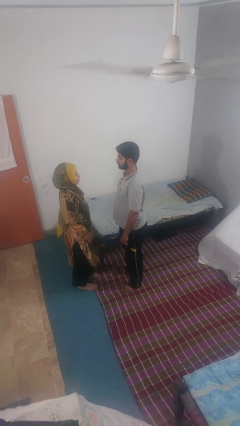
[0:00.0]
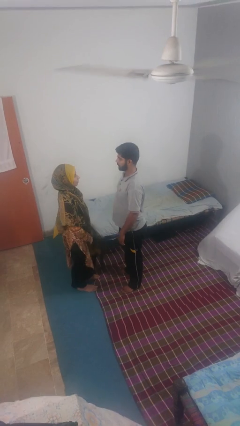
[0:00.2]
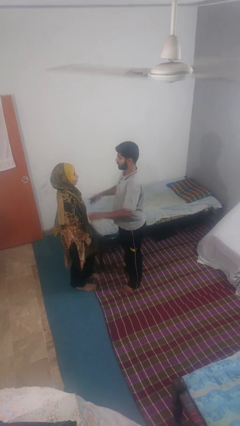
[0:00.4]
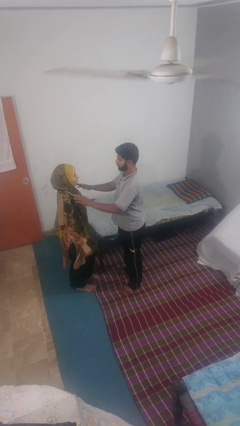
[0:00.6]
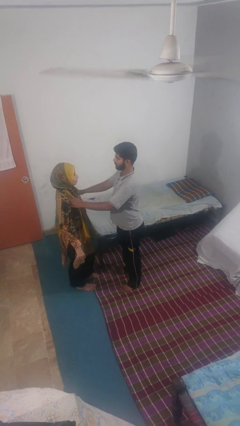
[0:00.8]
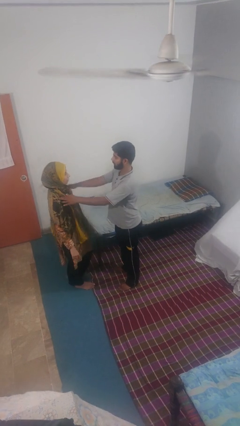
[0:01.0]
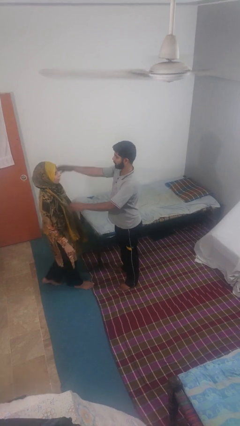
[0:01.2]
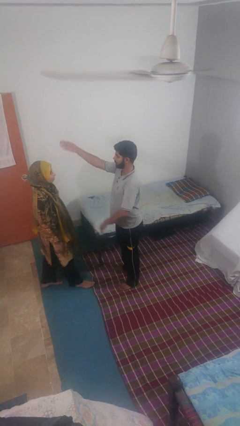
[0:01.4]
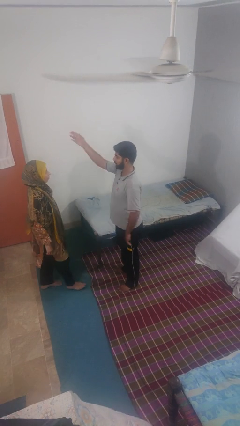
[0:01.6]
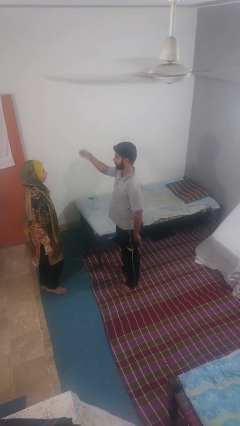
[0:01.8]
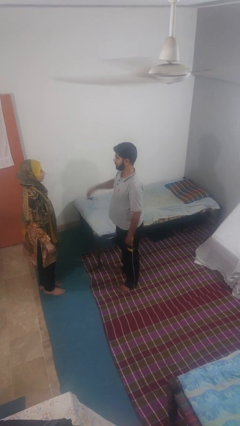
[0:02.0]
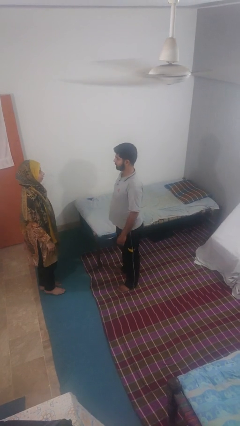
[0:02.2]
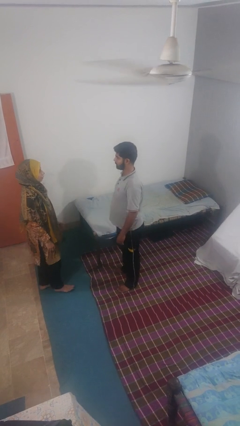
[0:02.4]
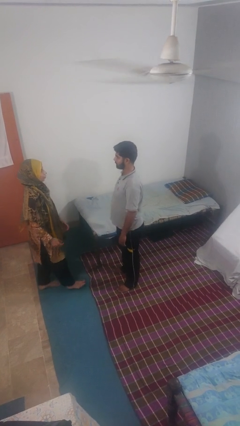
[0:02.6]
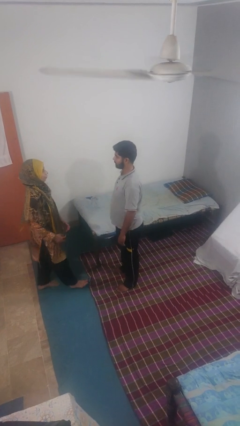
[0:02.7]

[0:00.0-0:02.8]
person shoves person

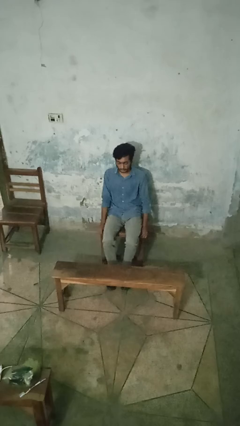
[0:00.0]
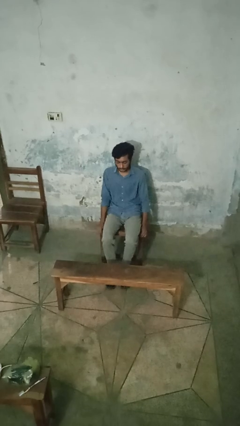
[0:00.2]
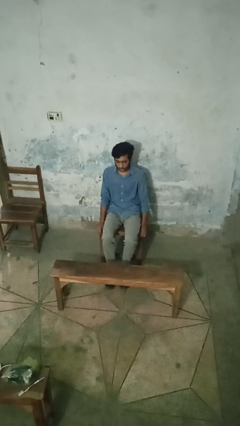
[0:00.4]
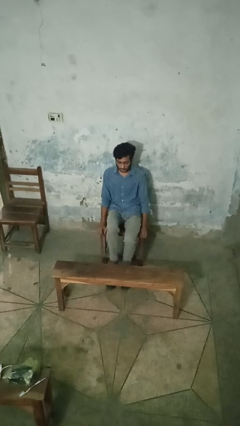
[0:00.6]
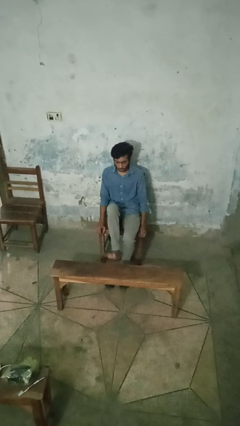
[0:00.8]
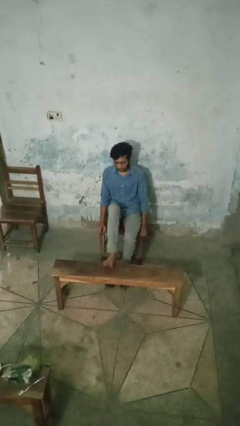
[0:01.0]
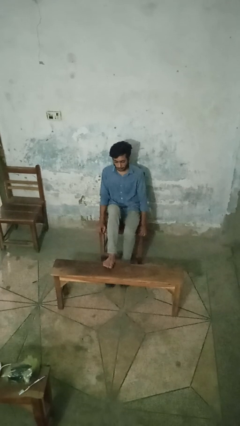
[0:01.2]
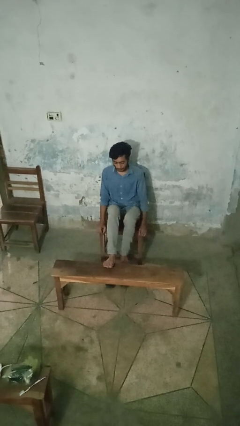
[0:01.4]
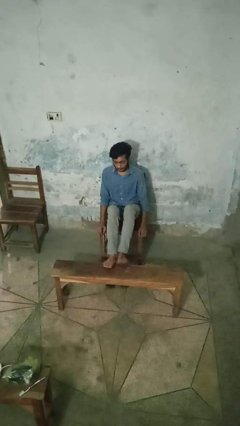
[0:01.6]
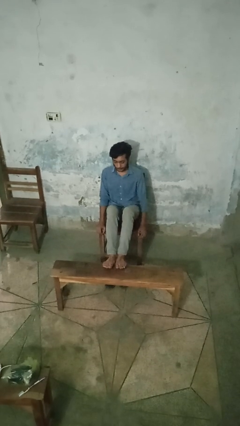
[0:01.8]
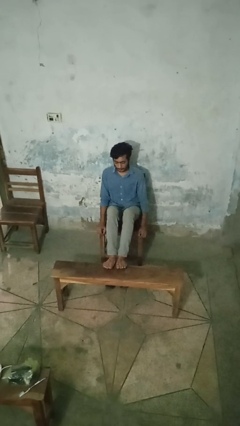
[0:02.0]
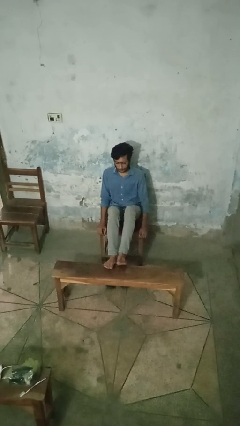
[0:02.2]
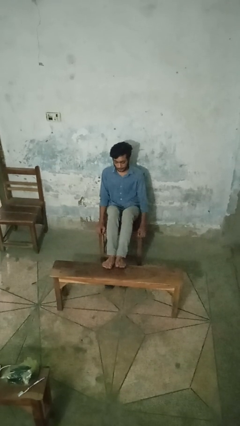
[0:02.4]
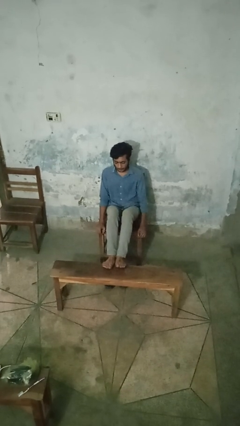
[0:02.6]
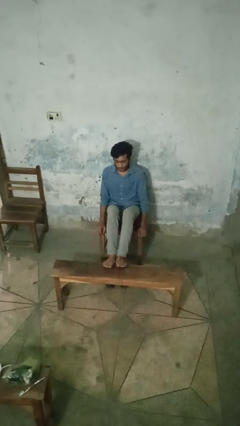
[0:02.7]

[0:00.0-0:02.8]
person puts feet up

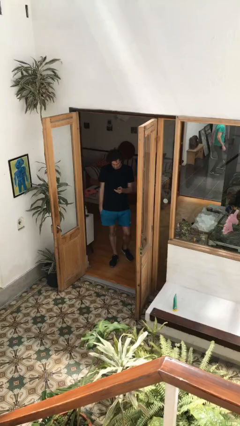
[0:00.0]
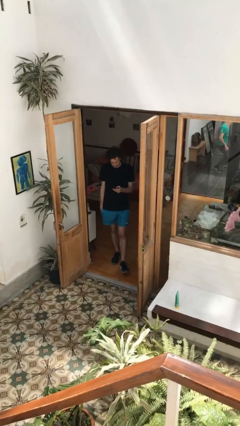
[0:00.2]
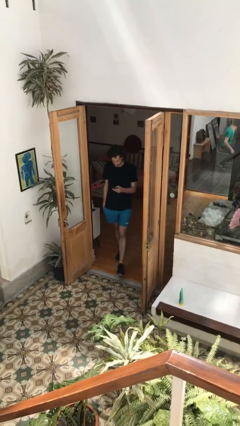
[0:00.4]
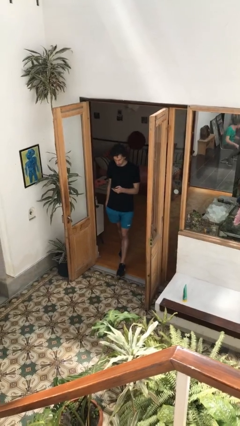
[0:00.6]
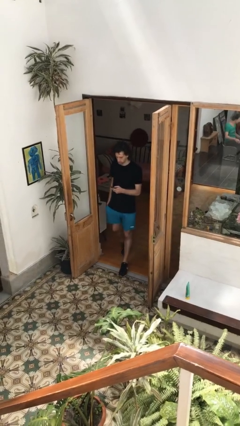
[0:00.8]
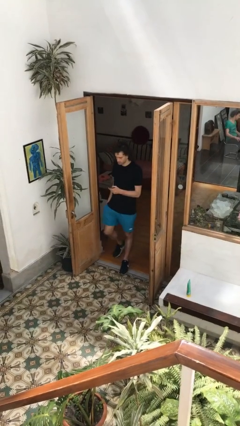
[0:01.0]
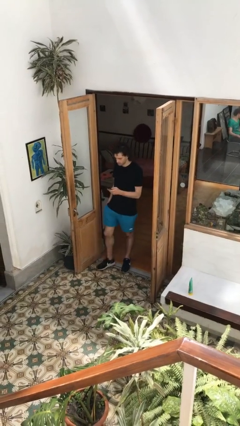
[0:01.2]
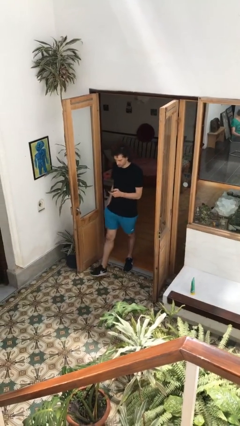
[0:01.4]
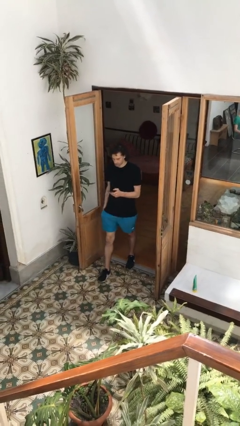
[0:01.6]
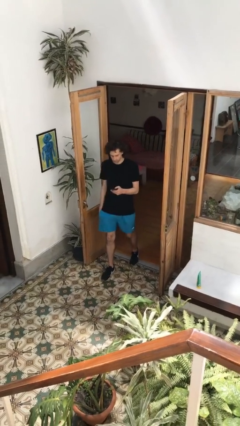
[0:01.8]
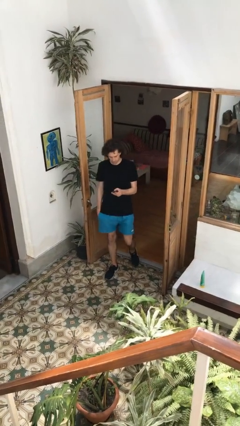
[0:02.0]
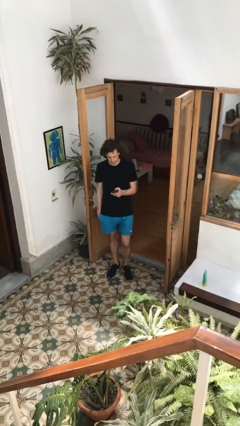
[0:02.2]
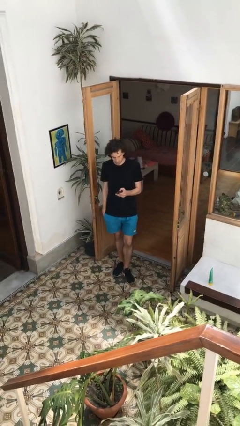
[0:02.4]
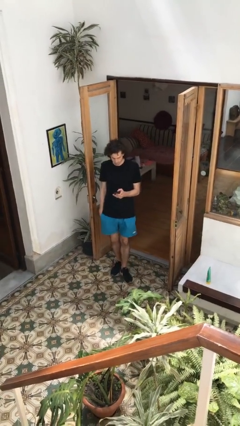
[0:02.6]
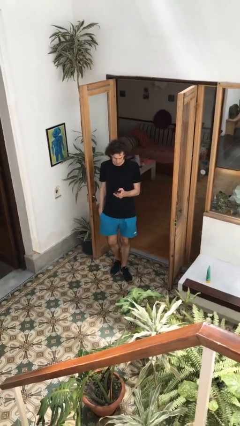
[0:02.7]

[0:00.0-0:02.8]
person enters scene through structure

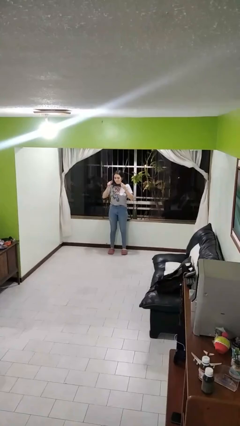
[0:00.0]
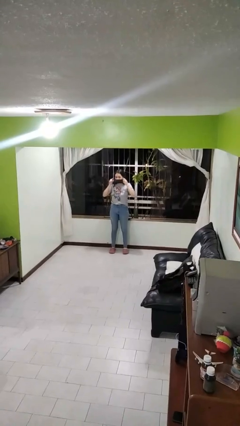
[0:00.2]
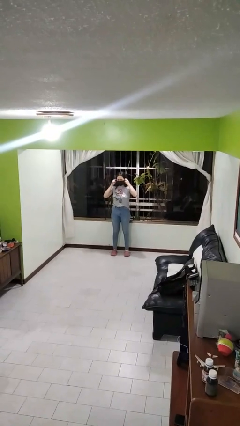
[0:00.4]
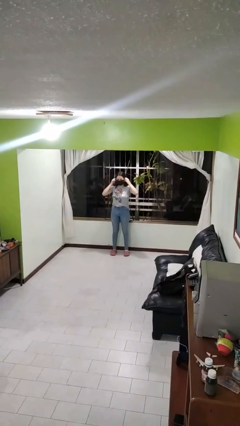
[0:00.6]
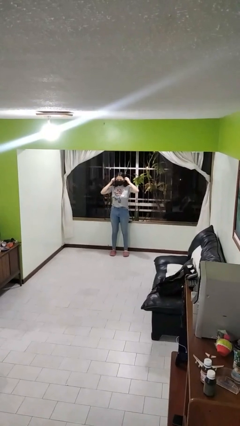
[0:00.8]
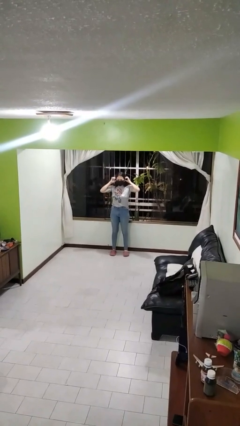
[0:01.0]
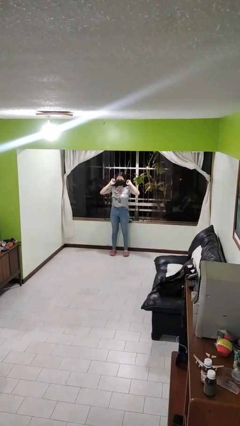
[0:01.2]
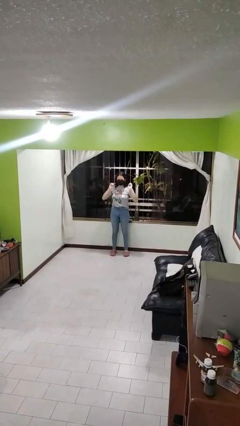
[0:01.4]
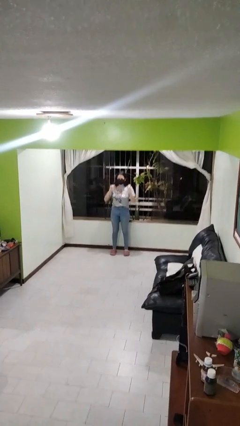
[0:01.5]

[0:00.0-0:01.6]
person puts on facemask

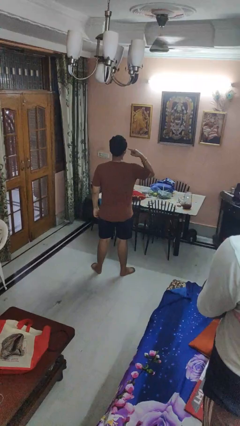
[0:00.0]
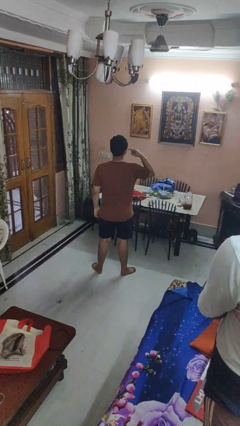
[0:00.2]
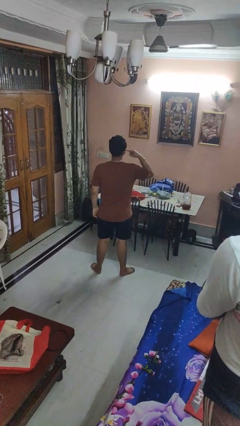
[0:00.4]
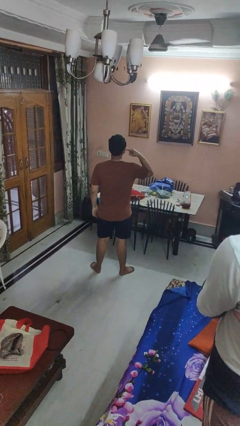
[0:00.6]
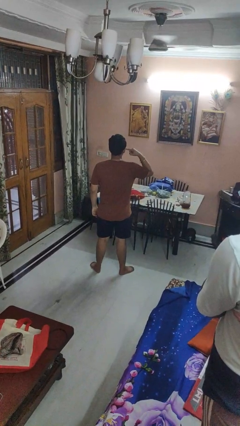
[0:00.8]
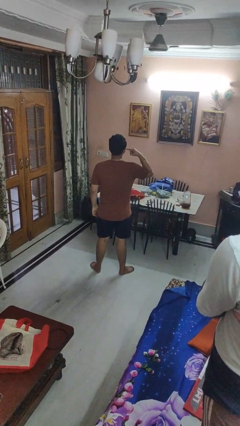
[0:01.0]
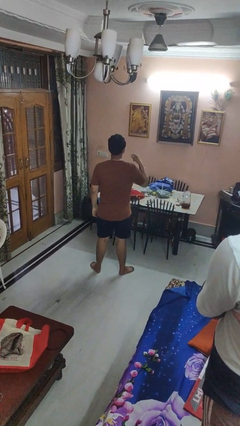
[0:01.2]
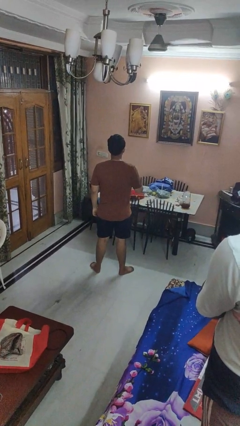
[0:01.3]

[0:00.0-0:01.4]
person gestures listen closely

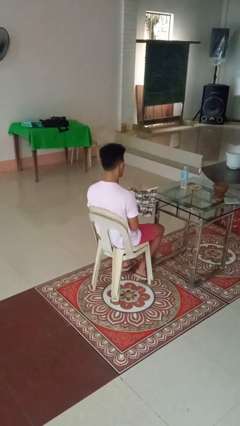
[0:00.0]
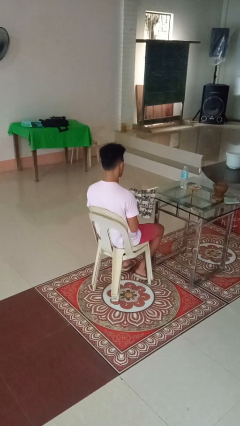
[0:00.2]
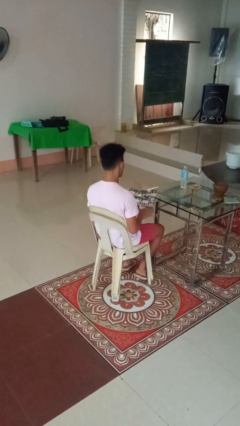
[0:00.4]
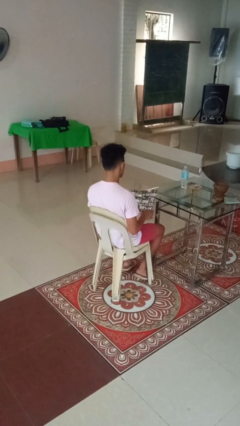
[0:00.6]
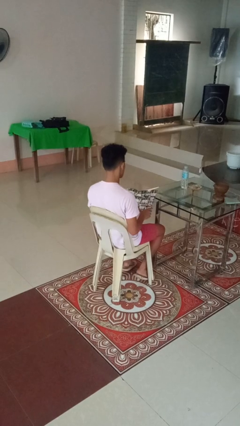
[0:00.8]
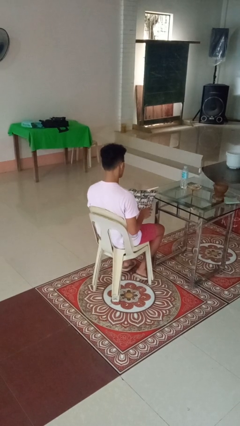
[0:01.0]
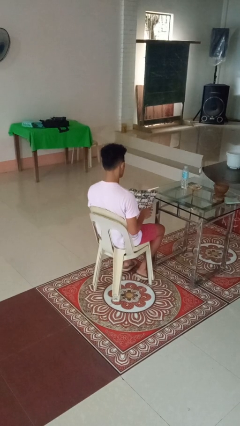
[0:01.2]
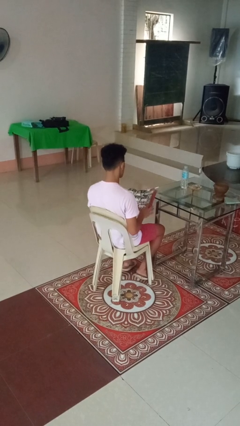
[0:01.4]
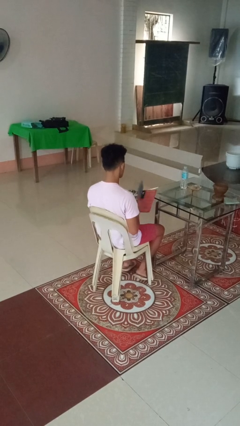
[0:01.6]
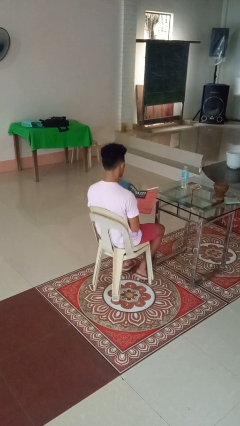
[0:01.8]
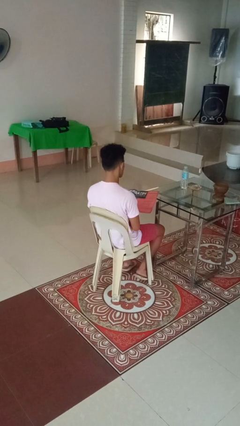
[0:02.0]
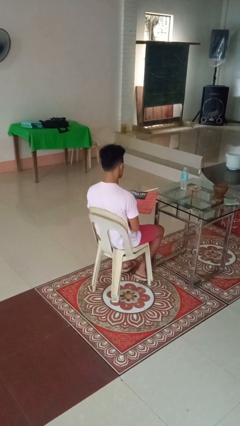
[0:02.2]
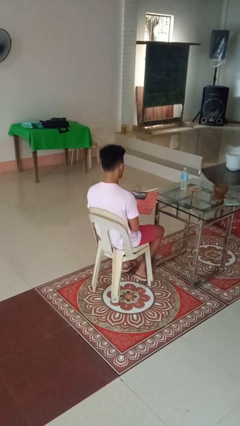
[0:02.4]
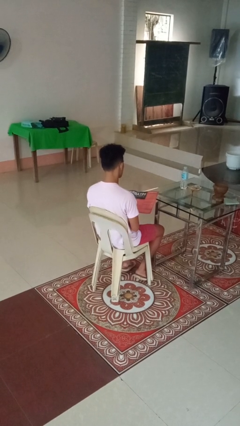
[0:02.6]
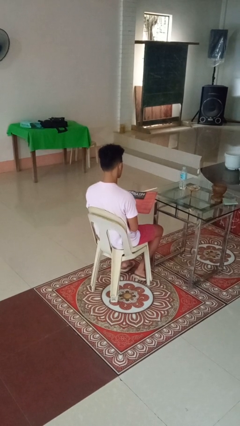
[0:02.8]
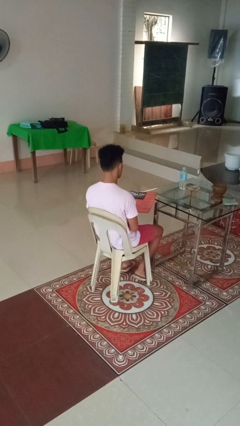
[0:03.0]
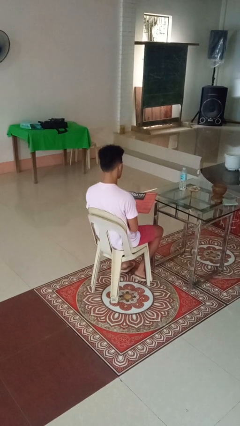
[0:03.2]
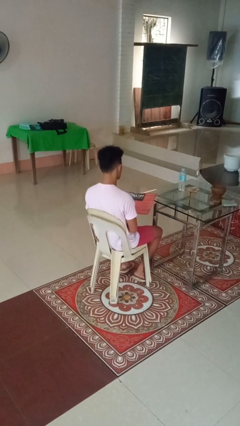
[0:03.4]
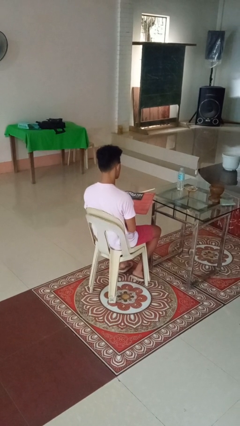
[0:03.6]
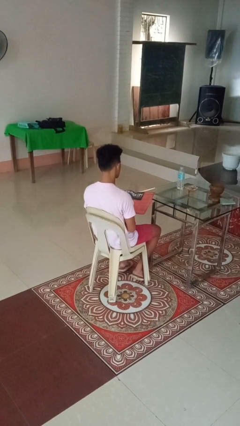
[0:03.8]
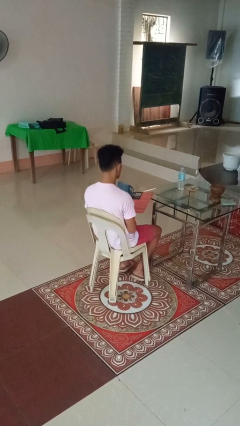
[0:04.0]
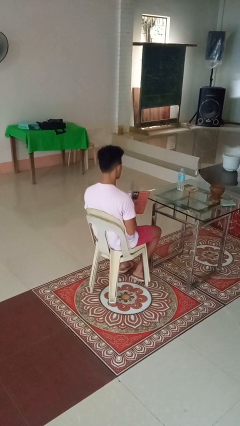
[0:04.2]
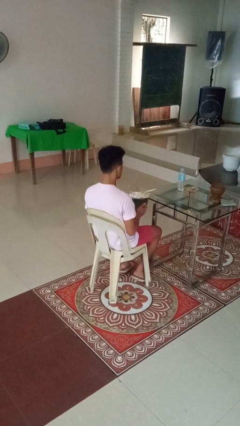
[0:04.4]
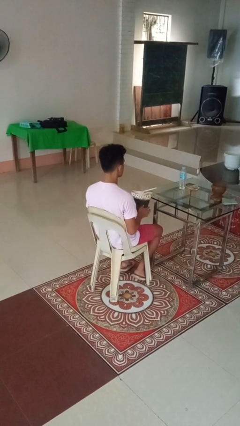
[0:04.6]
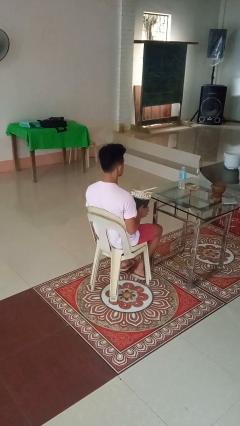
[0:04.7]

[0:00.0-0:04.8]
person reads magazine

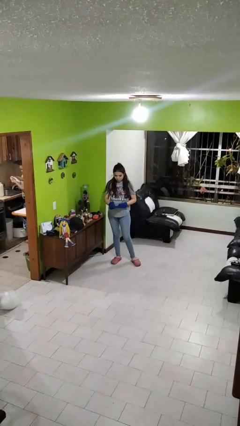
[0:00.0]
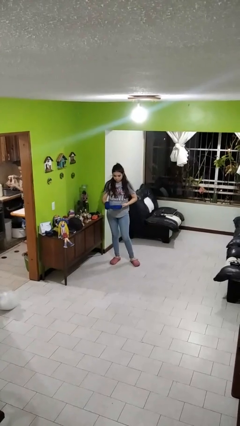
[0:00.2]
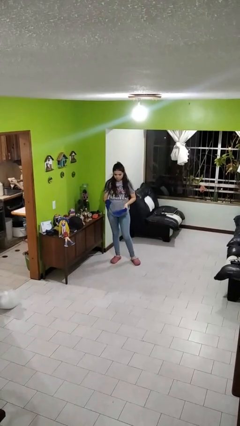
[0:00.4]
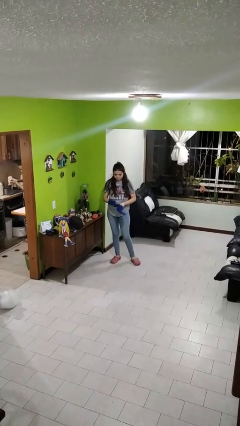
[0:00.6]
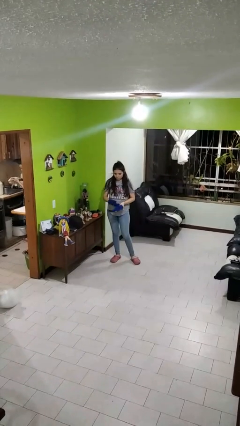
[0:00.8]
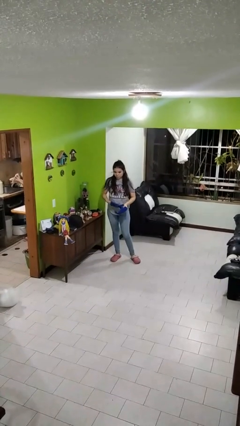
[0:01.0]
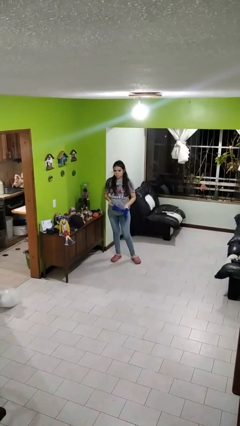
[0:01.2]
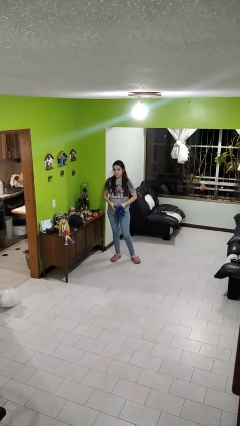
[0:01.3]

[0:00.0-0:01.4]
person takes off gloves
